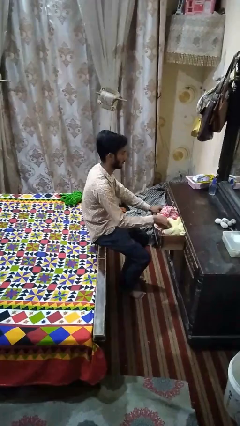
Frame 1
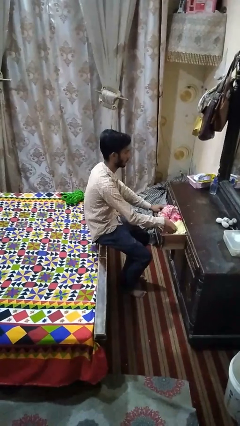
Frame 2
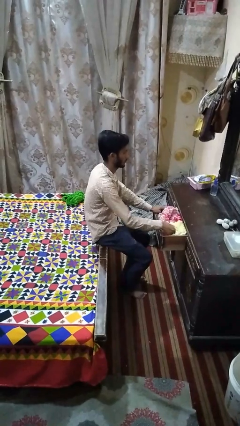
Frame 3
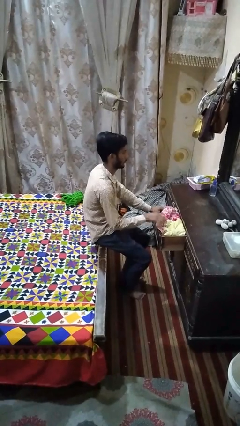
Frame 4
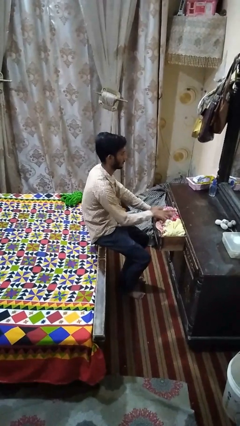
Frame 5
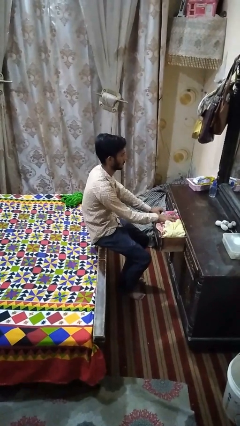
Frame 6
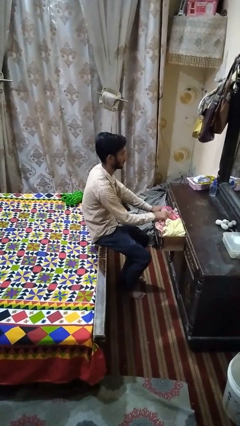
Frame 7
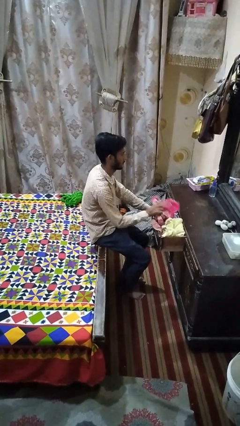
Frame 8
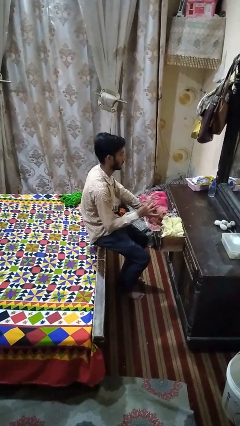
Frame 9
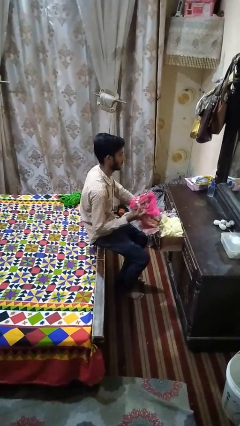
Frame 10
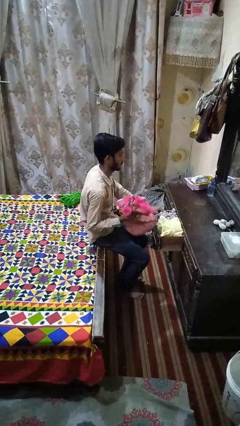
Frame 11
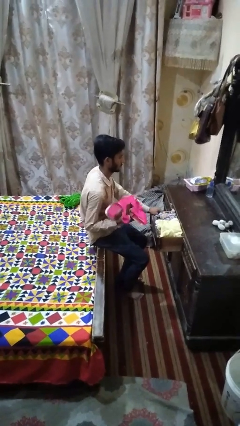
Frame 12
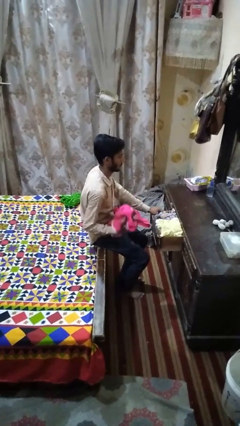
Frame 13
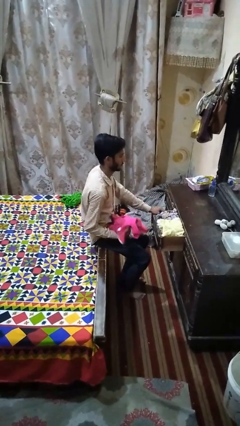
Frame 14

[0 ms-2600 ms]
person takes clothes from dresser

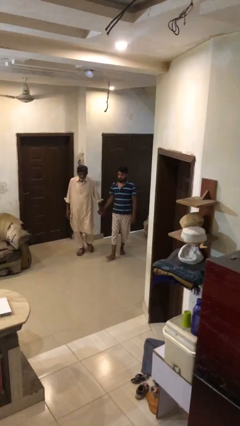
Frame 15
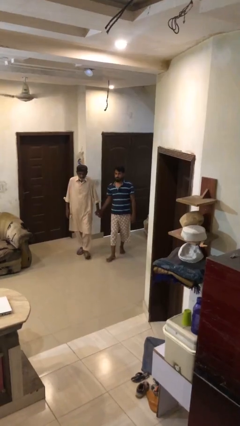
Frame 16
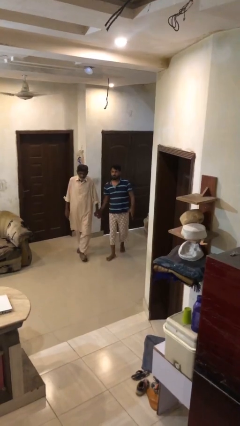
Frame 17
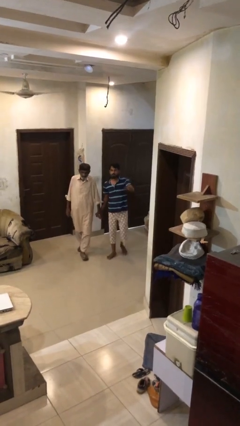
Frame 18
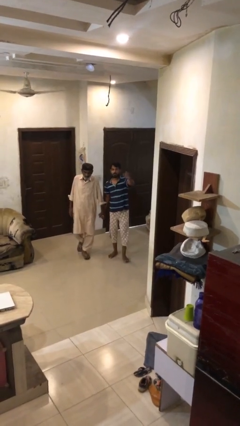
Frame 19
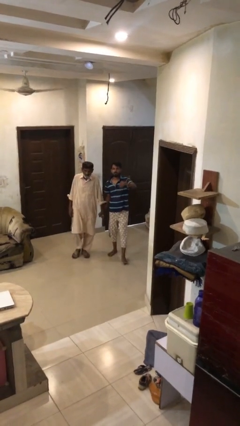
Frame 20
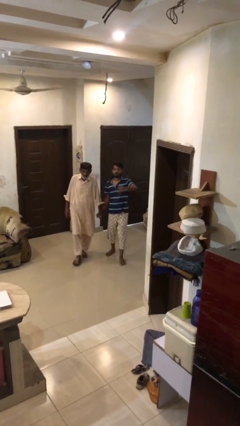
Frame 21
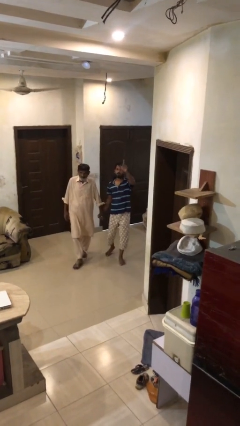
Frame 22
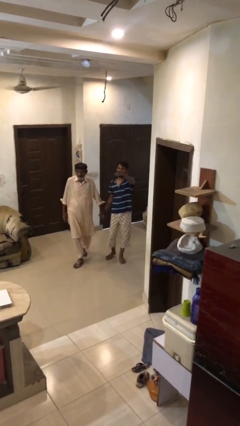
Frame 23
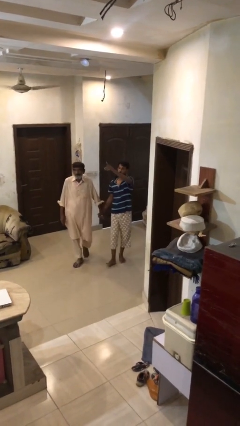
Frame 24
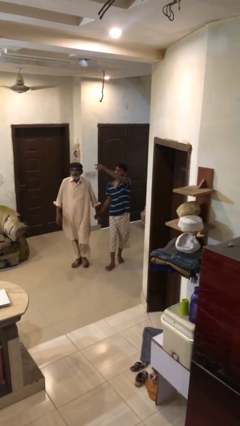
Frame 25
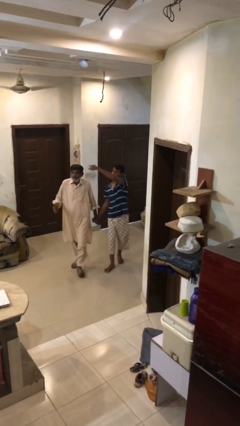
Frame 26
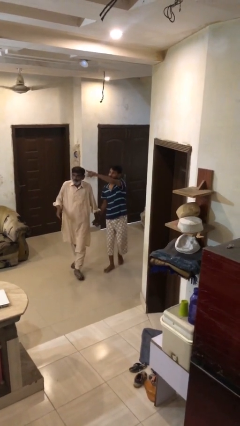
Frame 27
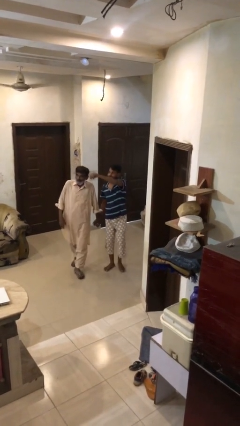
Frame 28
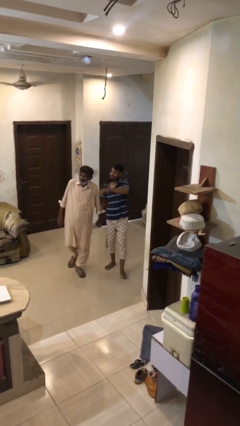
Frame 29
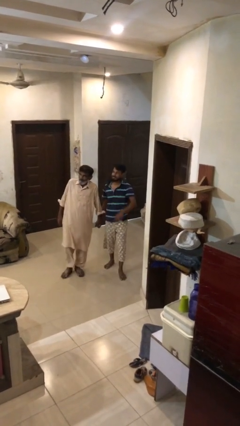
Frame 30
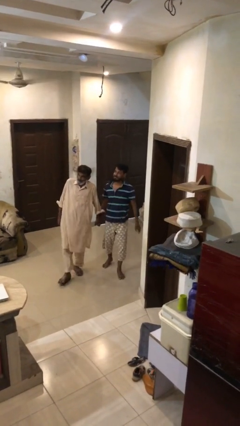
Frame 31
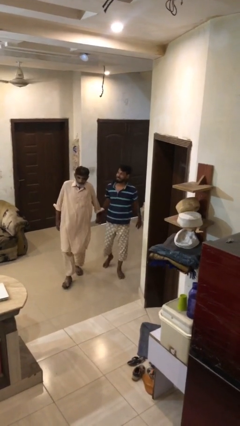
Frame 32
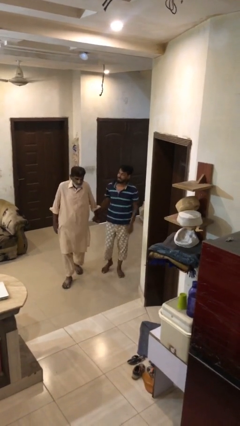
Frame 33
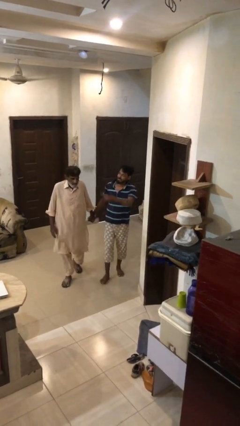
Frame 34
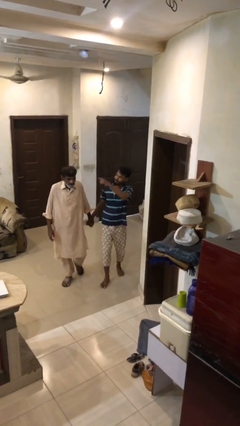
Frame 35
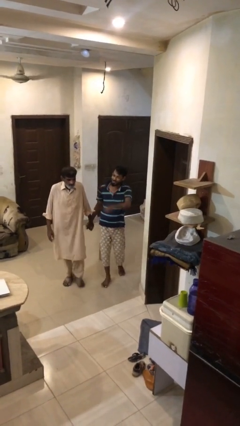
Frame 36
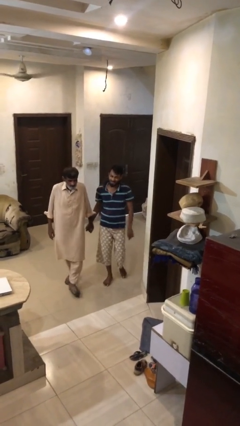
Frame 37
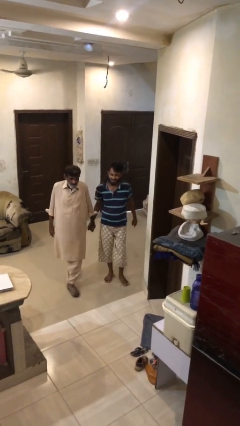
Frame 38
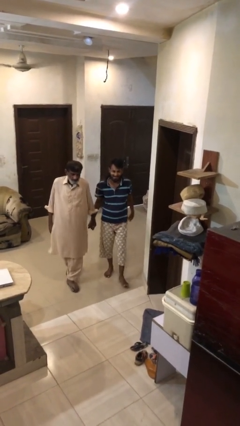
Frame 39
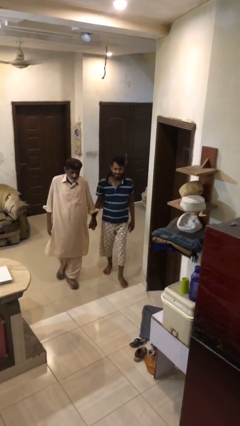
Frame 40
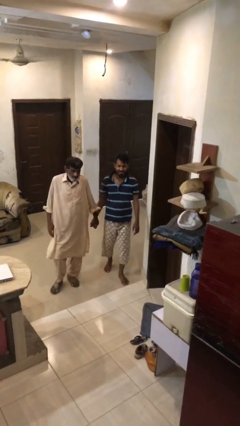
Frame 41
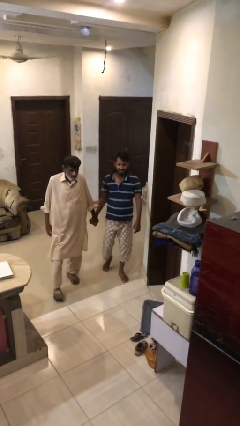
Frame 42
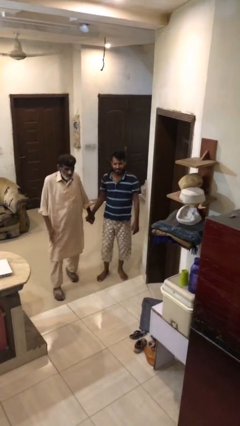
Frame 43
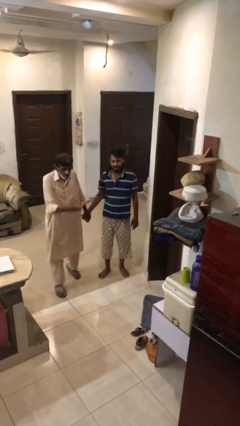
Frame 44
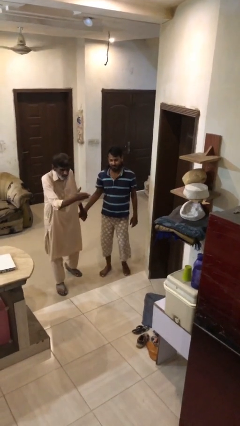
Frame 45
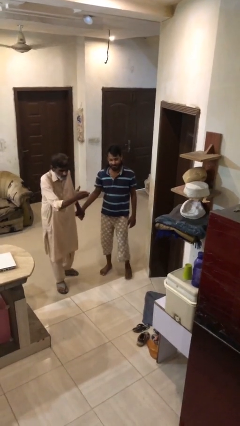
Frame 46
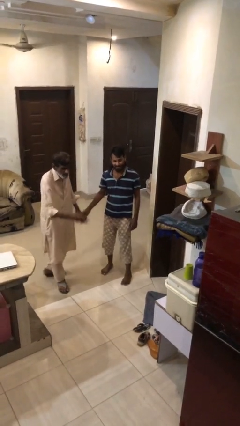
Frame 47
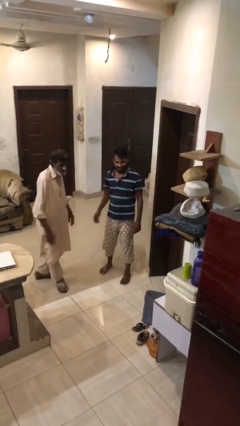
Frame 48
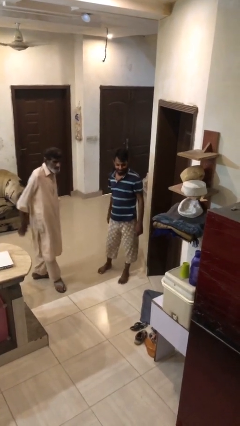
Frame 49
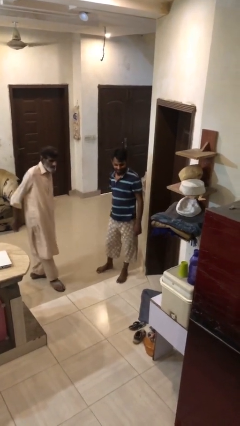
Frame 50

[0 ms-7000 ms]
person holds hand

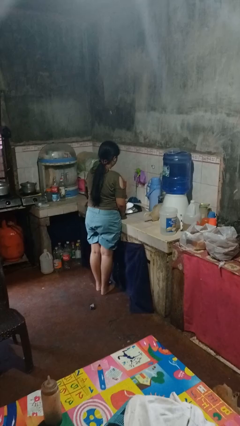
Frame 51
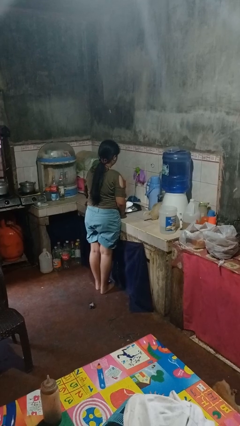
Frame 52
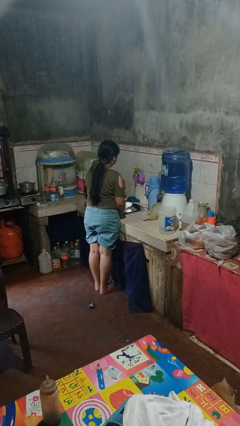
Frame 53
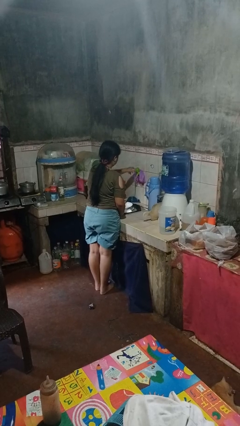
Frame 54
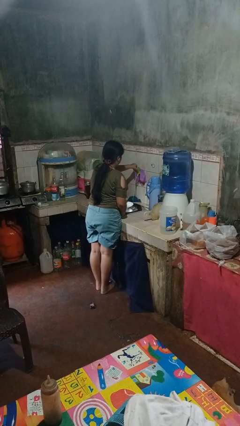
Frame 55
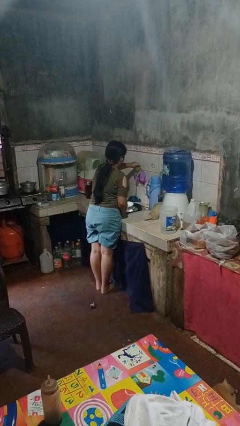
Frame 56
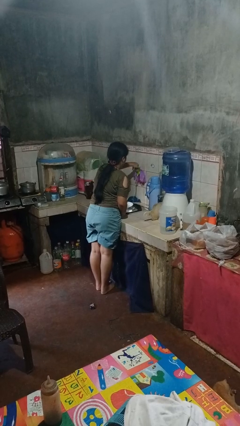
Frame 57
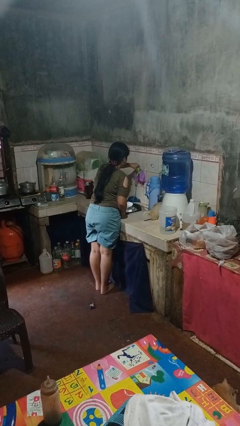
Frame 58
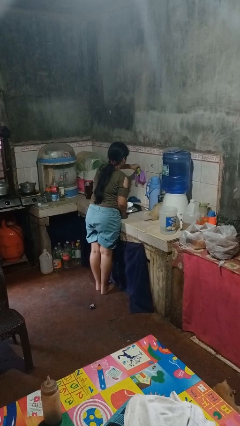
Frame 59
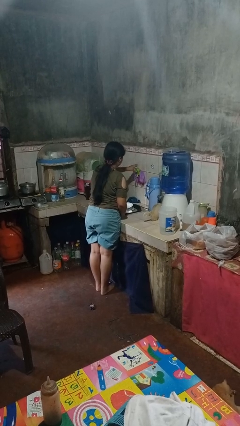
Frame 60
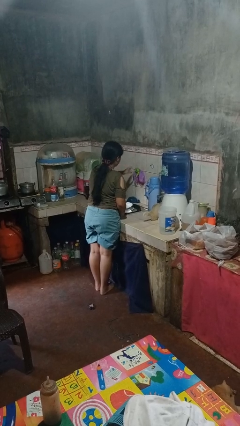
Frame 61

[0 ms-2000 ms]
person turns off faucet

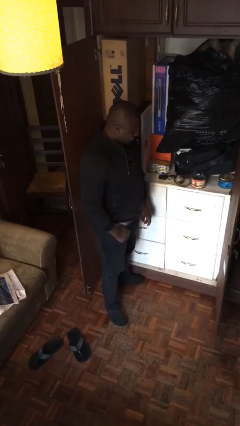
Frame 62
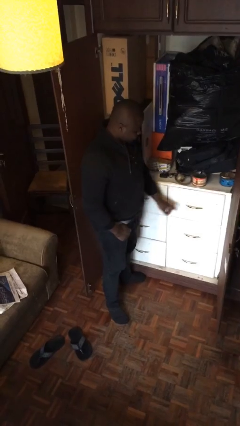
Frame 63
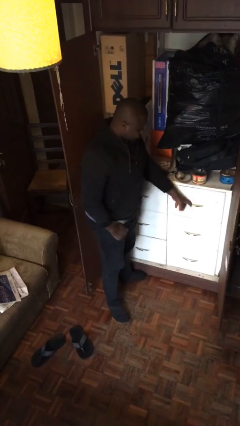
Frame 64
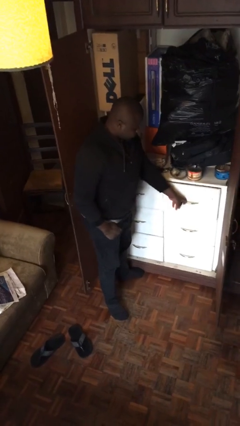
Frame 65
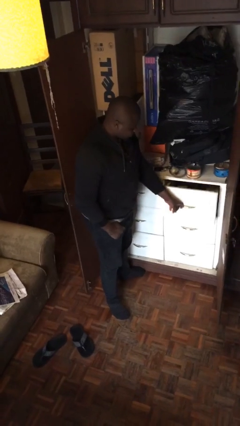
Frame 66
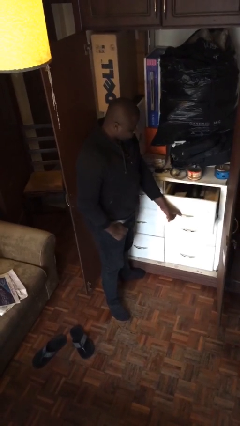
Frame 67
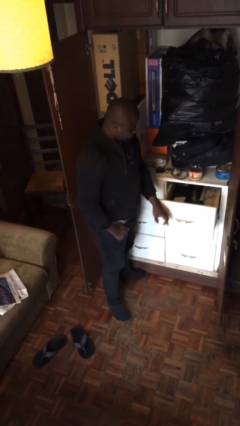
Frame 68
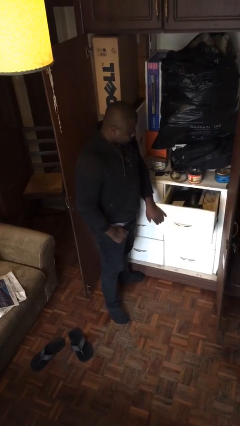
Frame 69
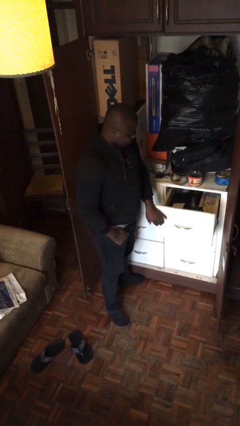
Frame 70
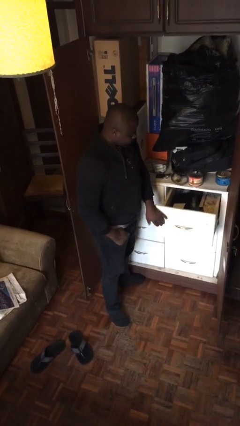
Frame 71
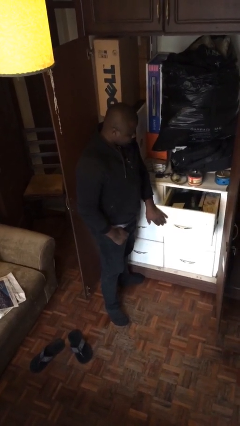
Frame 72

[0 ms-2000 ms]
person opens dresser drawer

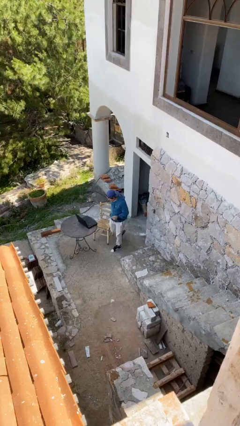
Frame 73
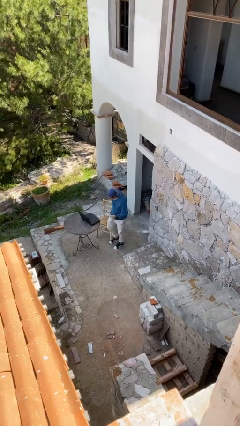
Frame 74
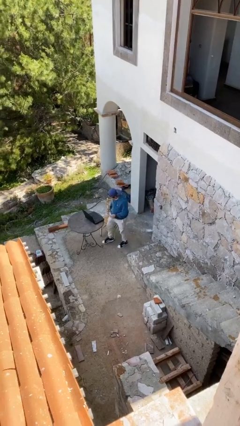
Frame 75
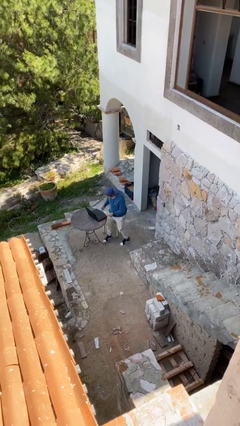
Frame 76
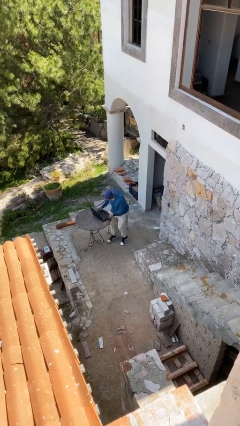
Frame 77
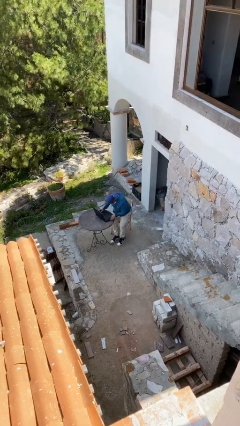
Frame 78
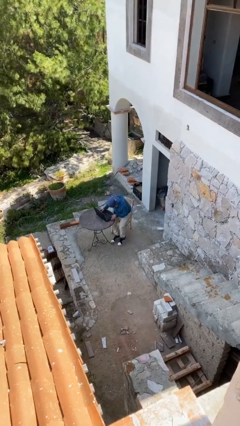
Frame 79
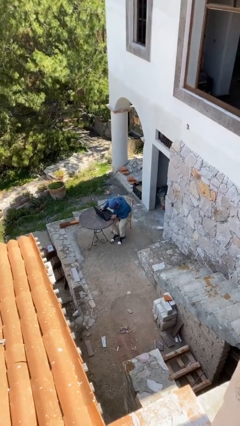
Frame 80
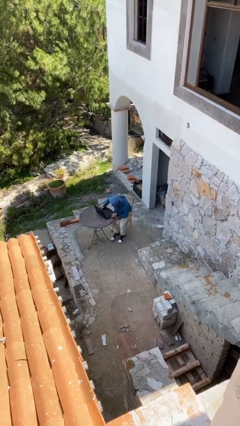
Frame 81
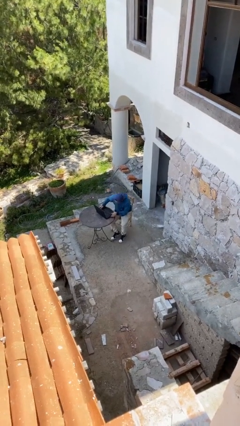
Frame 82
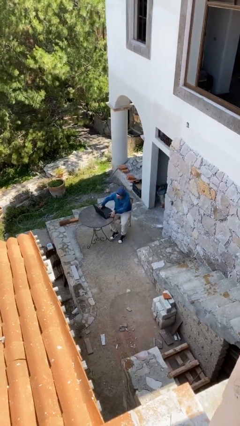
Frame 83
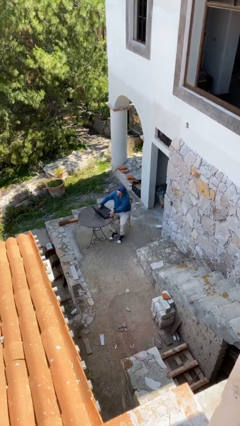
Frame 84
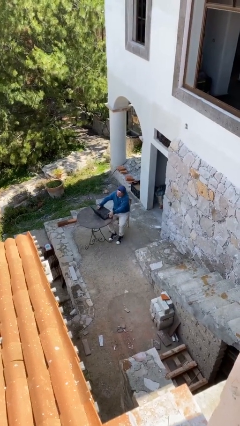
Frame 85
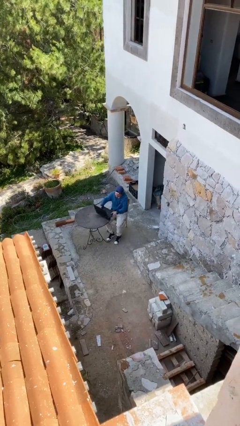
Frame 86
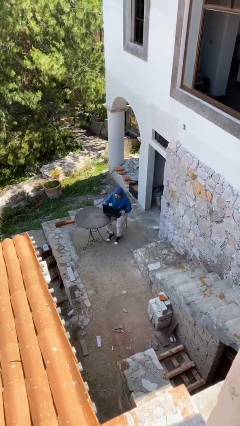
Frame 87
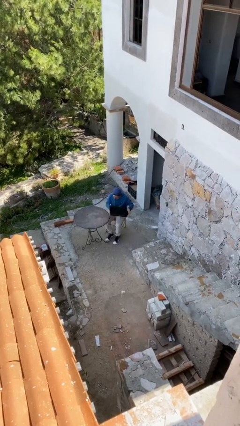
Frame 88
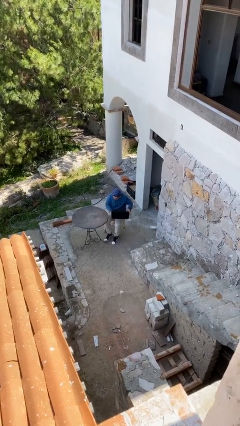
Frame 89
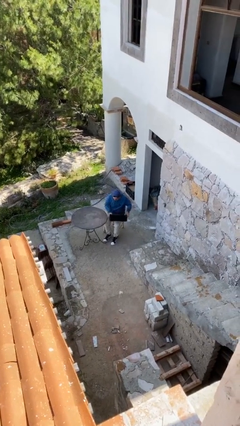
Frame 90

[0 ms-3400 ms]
person sits down

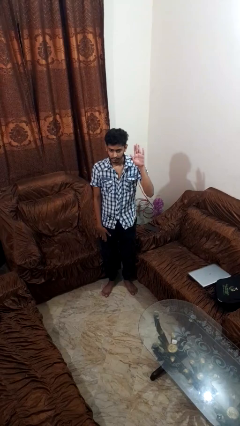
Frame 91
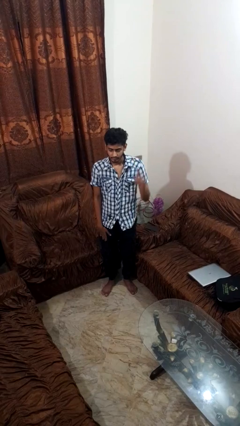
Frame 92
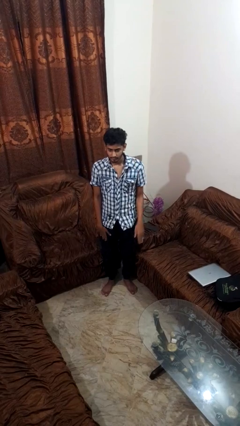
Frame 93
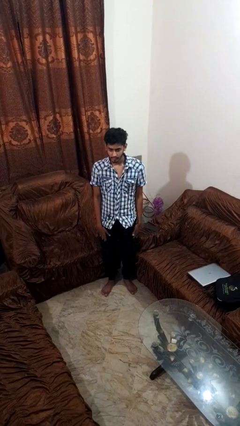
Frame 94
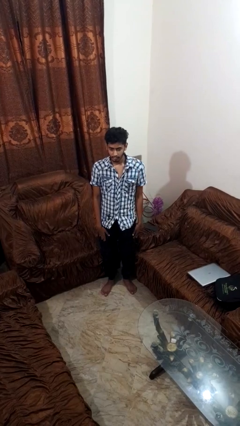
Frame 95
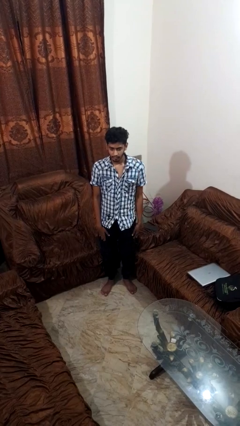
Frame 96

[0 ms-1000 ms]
person gestures lower hand
